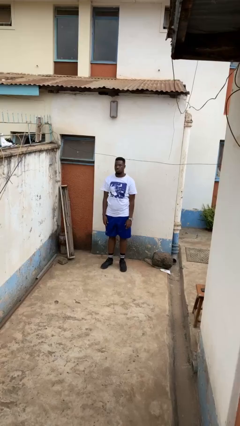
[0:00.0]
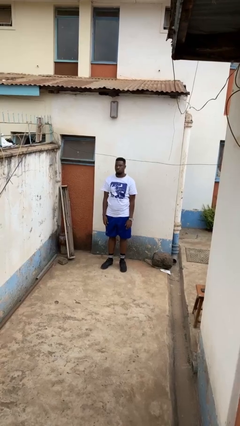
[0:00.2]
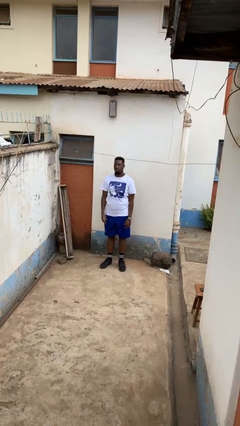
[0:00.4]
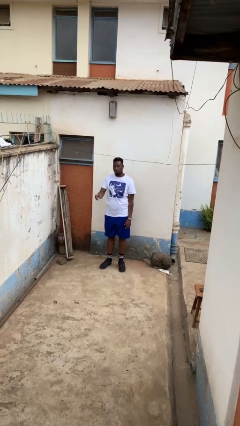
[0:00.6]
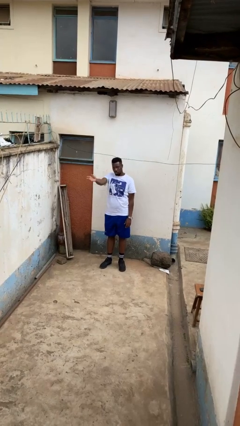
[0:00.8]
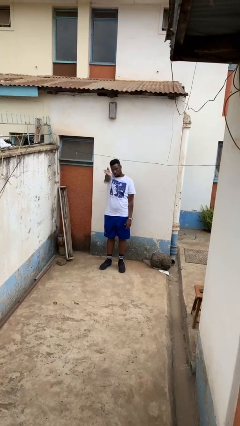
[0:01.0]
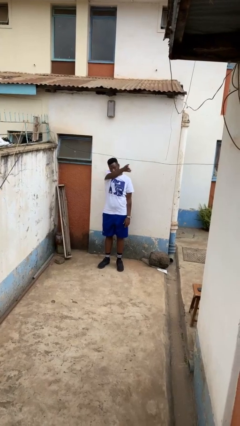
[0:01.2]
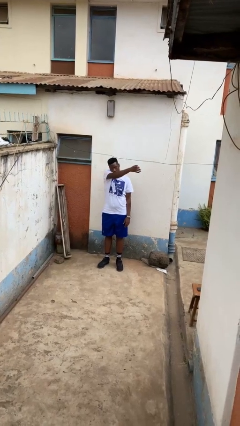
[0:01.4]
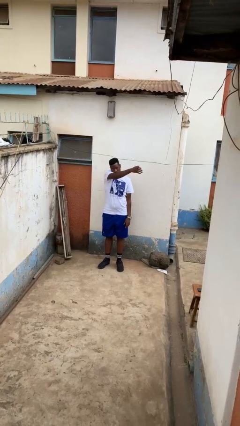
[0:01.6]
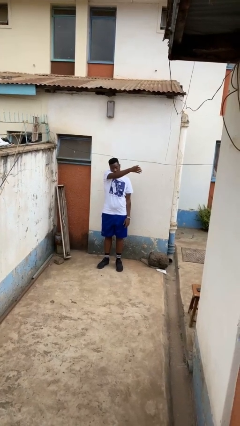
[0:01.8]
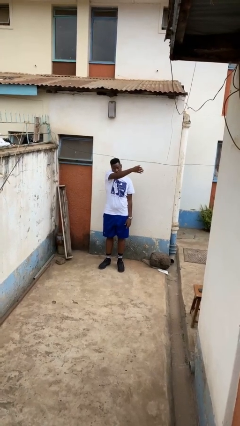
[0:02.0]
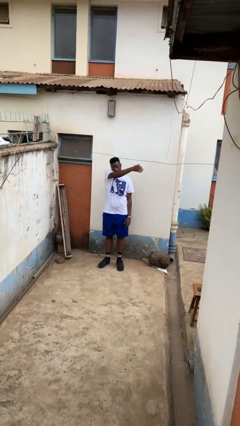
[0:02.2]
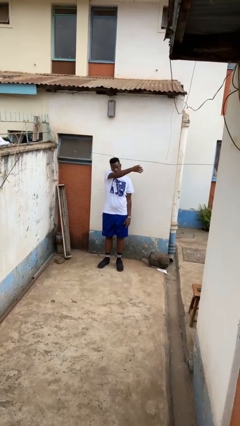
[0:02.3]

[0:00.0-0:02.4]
person gestures swipe left

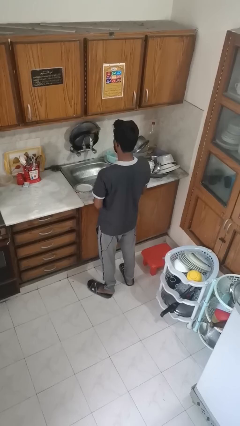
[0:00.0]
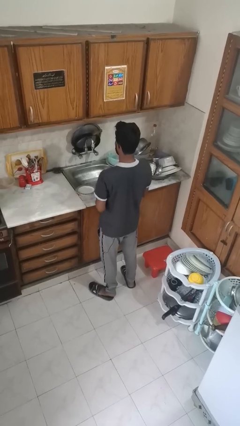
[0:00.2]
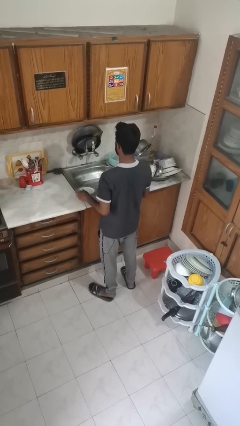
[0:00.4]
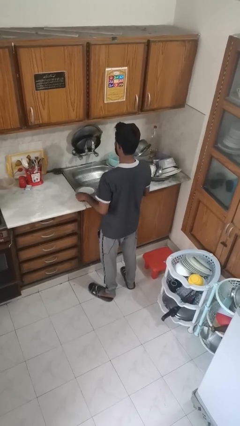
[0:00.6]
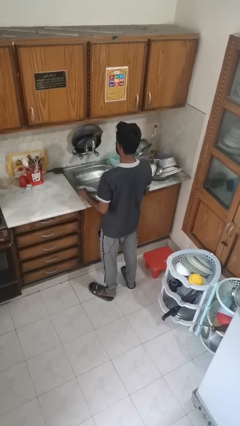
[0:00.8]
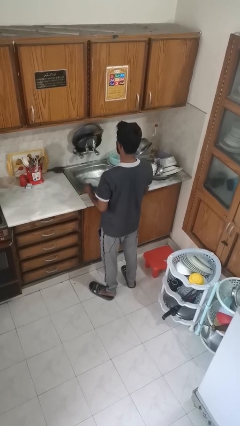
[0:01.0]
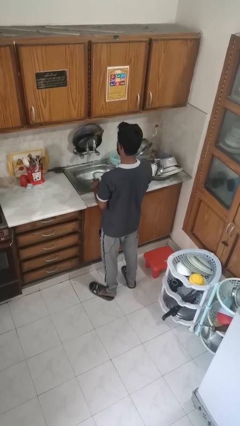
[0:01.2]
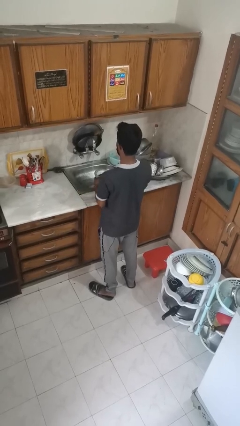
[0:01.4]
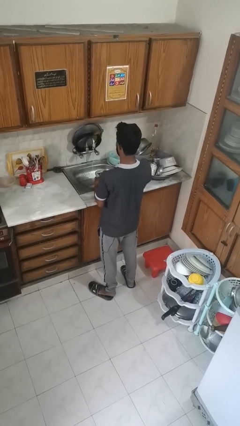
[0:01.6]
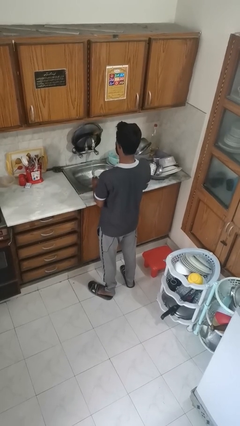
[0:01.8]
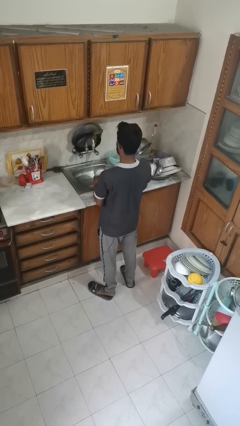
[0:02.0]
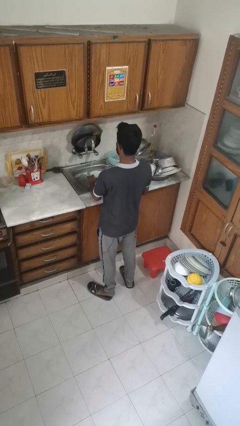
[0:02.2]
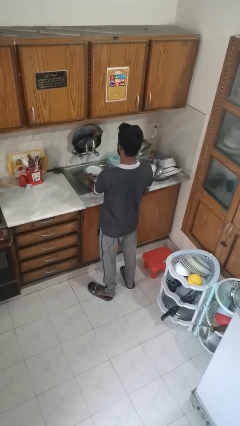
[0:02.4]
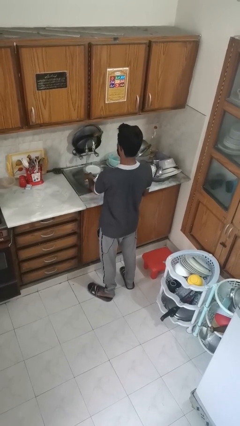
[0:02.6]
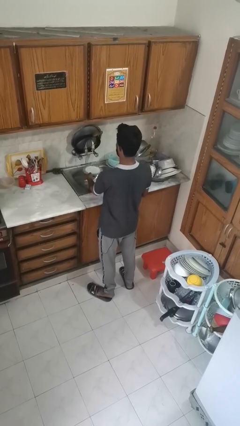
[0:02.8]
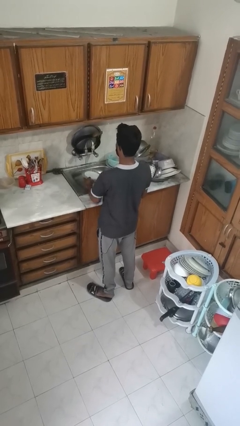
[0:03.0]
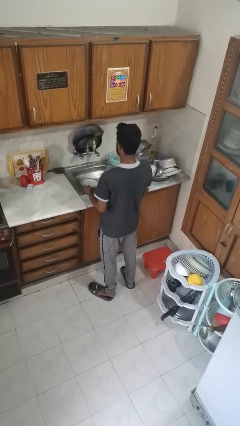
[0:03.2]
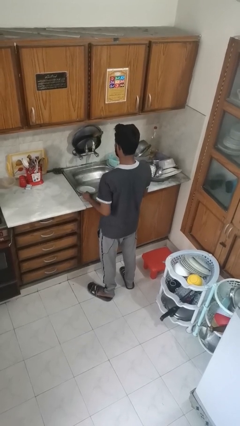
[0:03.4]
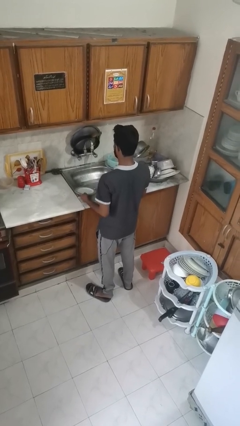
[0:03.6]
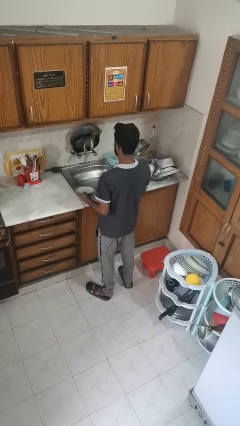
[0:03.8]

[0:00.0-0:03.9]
person washes dish

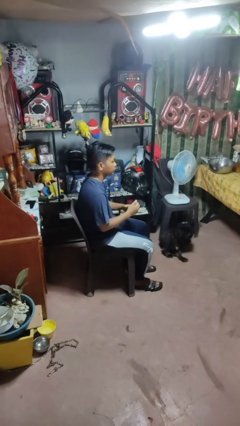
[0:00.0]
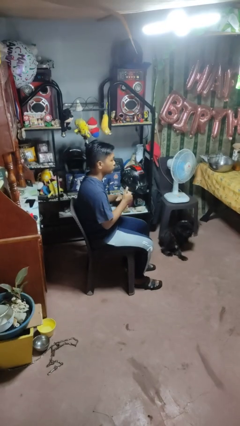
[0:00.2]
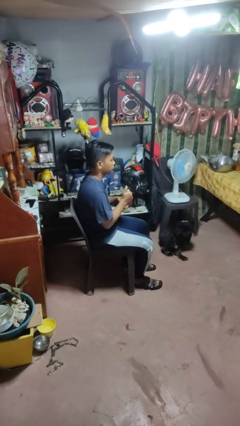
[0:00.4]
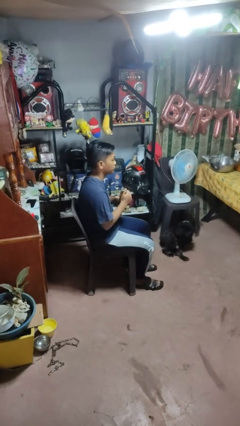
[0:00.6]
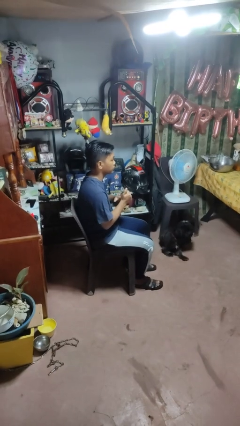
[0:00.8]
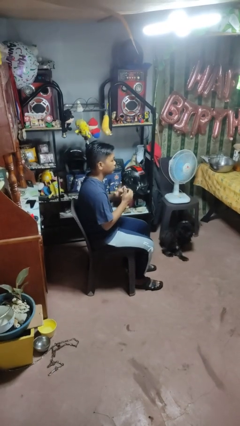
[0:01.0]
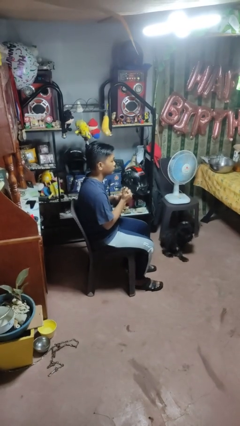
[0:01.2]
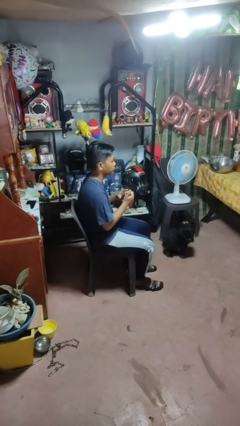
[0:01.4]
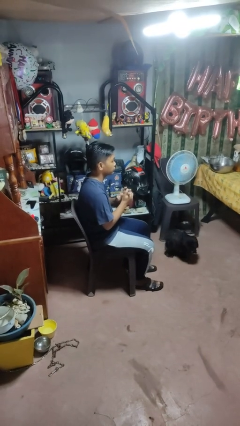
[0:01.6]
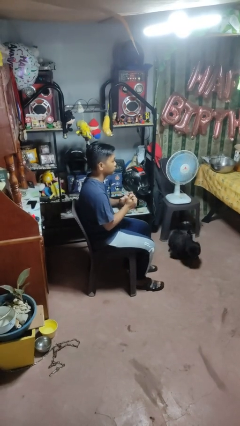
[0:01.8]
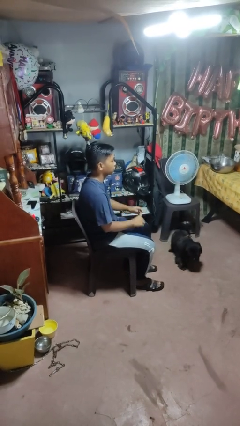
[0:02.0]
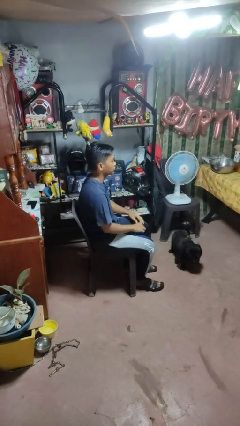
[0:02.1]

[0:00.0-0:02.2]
person cracks knuckles

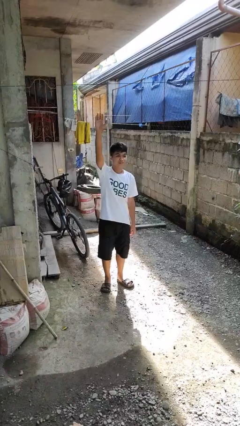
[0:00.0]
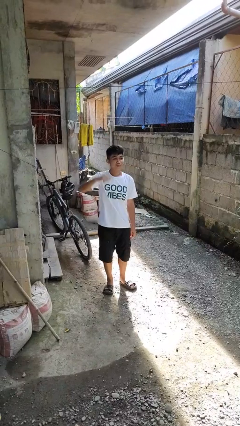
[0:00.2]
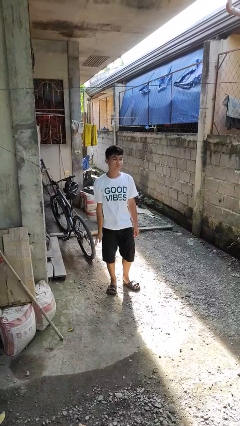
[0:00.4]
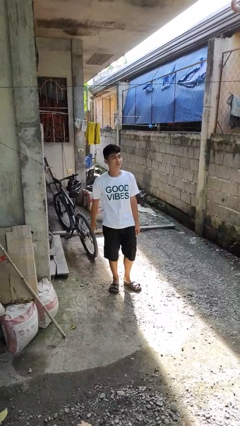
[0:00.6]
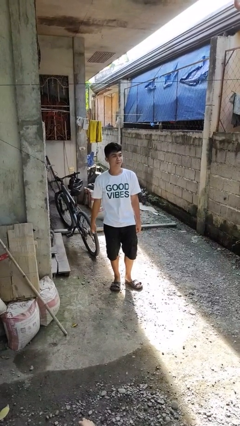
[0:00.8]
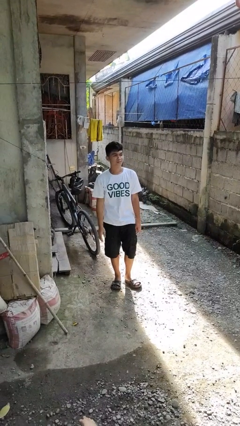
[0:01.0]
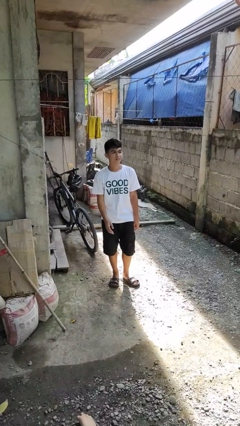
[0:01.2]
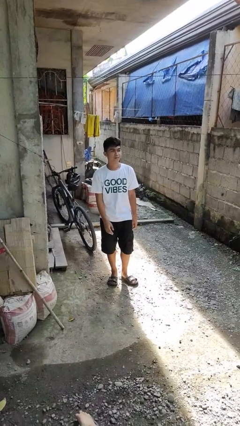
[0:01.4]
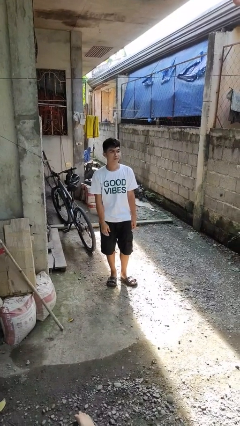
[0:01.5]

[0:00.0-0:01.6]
person gestures lower hand

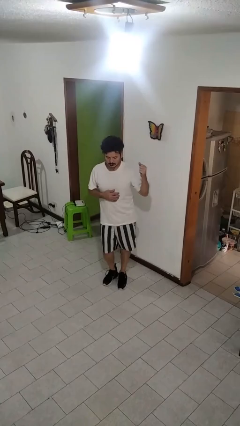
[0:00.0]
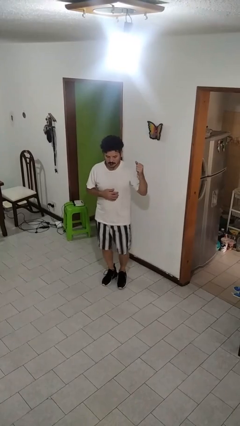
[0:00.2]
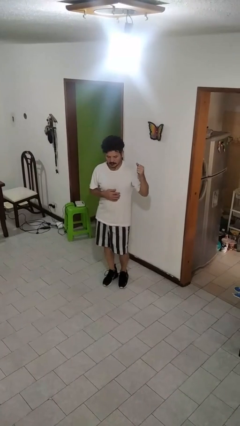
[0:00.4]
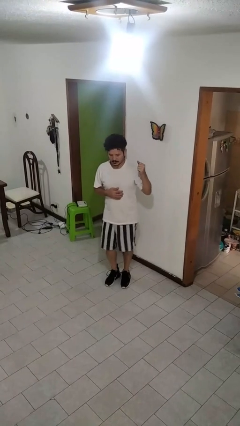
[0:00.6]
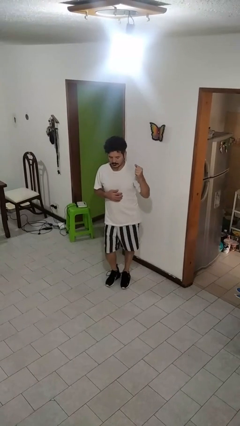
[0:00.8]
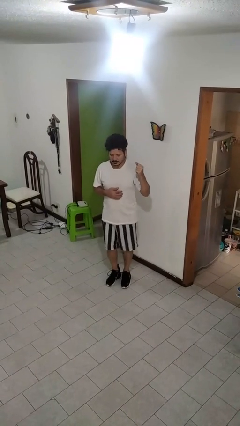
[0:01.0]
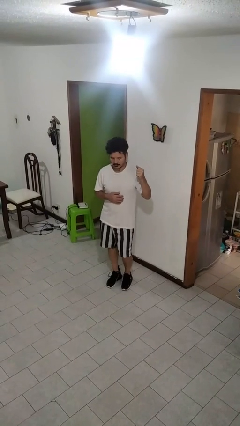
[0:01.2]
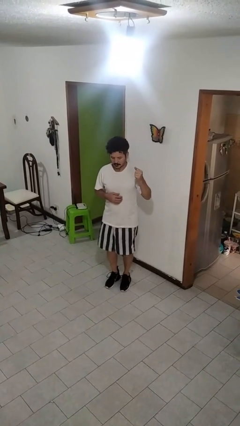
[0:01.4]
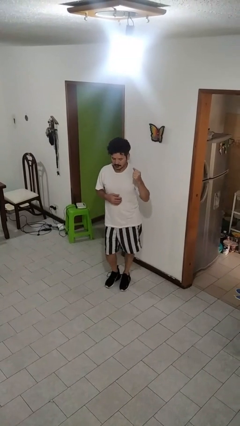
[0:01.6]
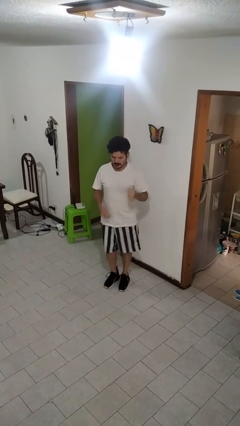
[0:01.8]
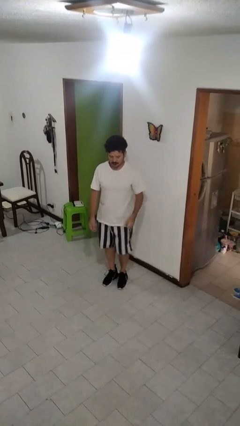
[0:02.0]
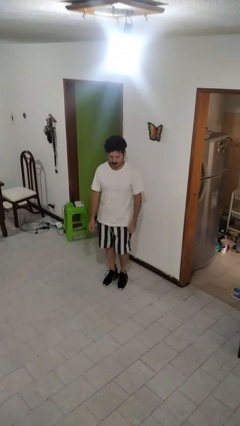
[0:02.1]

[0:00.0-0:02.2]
person dances in place

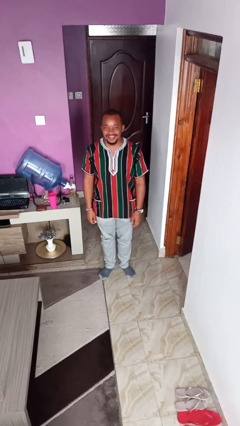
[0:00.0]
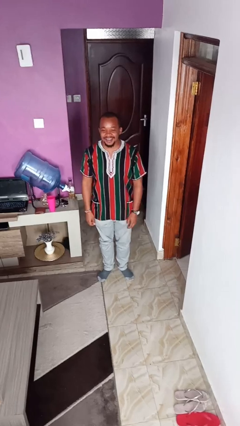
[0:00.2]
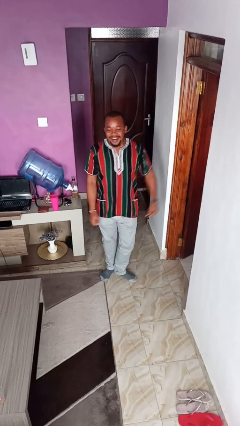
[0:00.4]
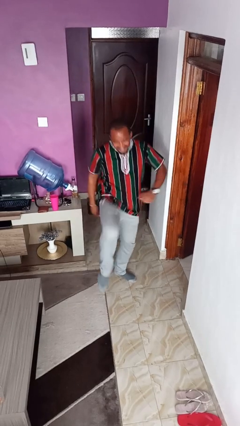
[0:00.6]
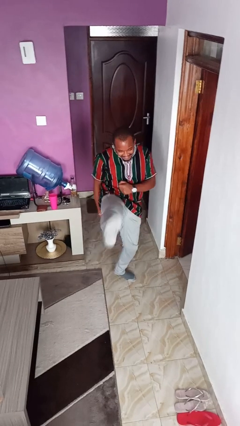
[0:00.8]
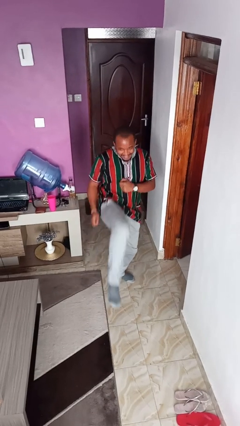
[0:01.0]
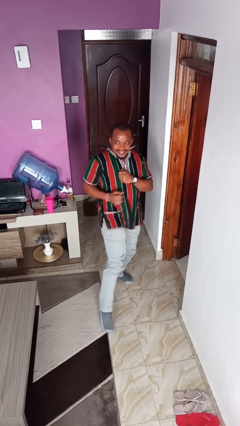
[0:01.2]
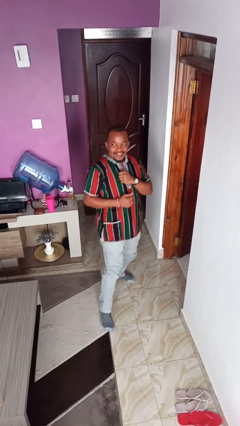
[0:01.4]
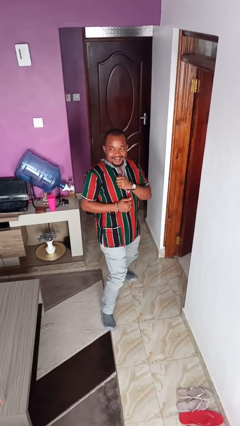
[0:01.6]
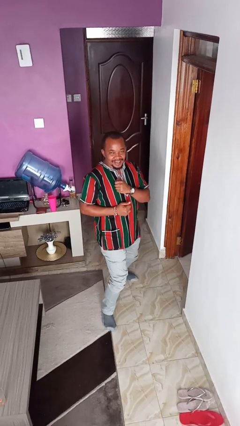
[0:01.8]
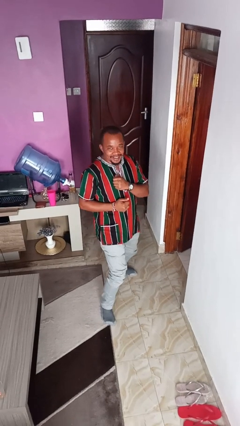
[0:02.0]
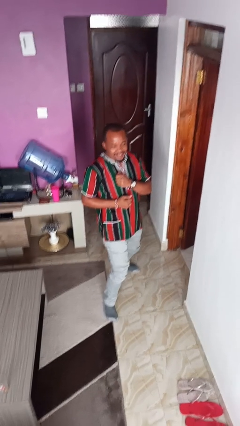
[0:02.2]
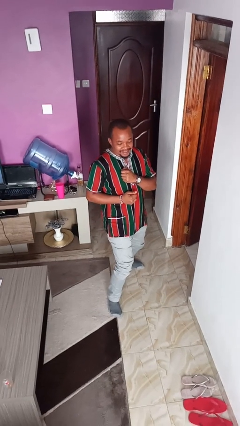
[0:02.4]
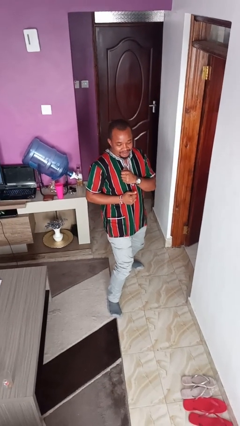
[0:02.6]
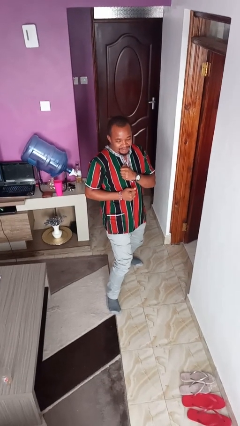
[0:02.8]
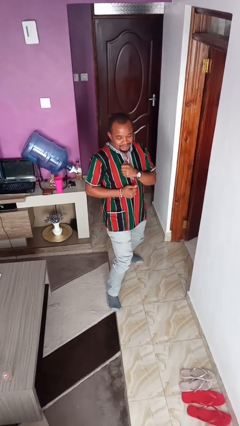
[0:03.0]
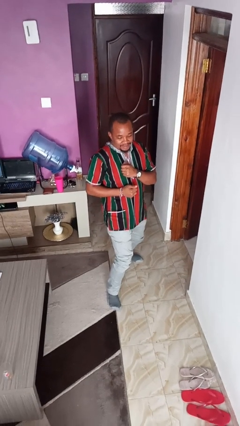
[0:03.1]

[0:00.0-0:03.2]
person karate kicks

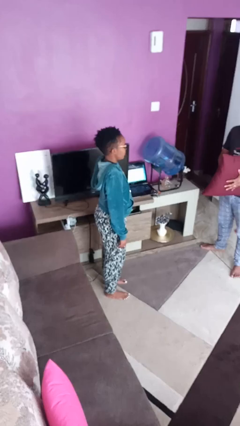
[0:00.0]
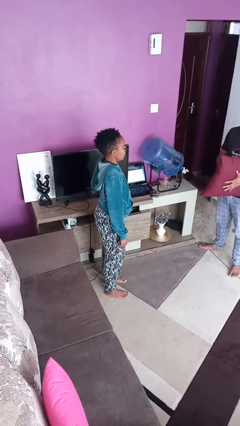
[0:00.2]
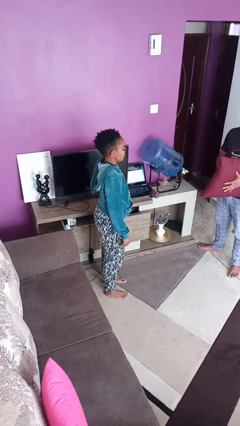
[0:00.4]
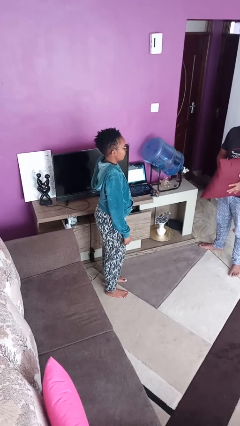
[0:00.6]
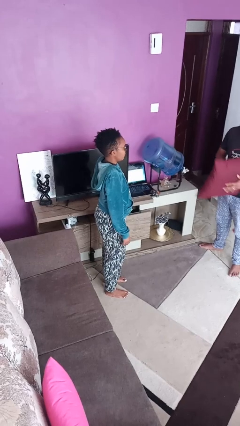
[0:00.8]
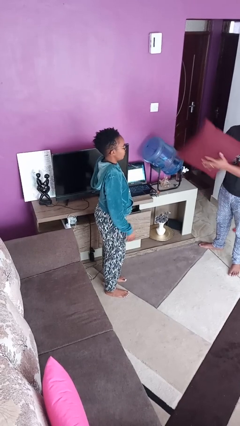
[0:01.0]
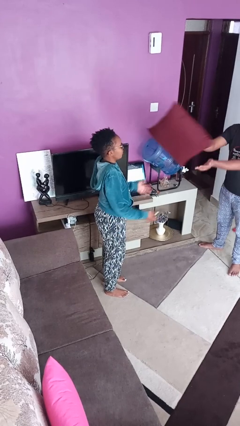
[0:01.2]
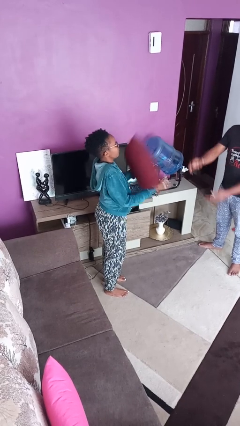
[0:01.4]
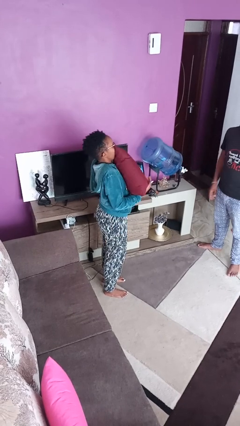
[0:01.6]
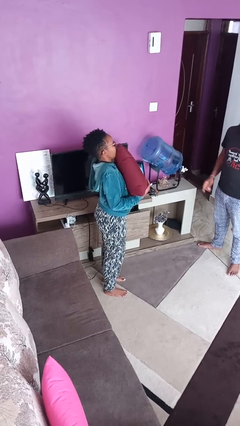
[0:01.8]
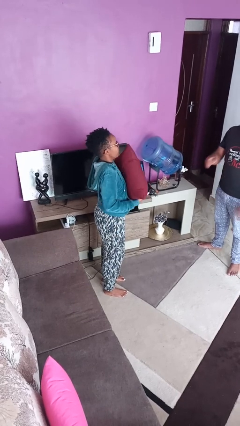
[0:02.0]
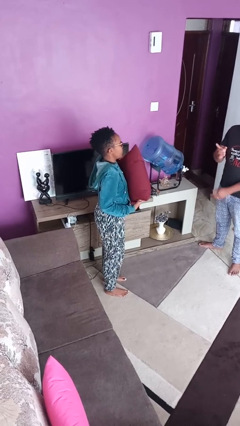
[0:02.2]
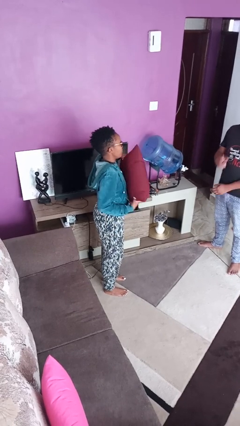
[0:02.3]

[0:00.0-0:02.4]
person catches object from person
